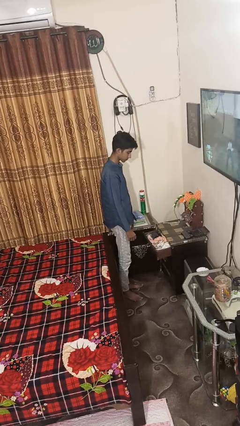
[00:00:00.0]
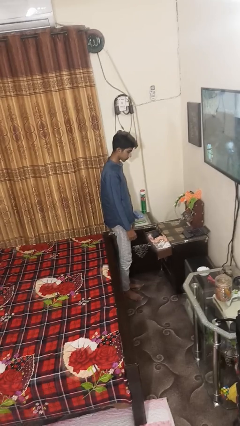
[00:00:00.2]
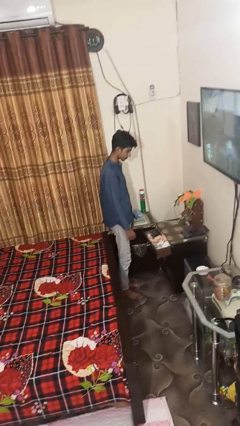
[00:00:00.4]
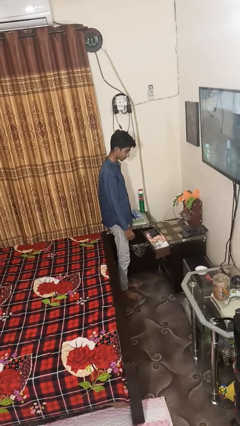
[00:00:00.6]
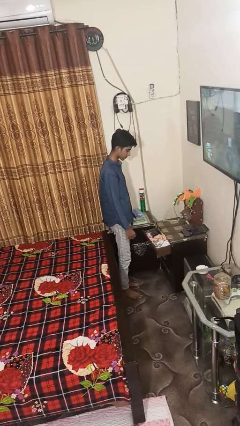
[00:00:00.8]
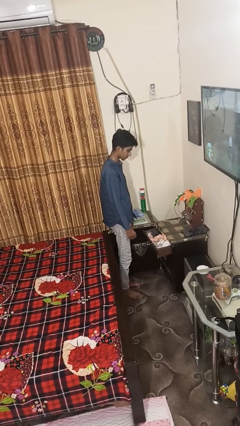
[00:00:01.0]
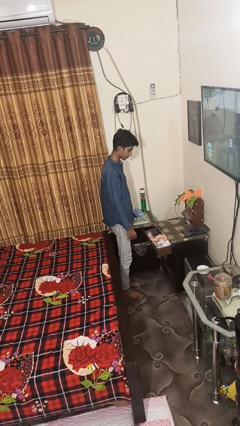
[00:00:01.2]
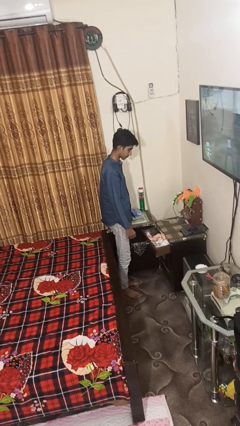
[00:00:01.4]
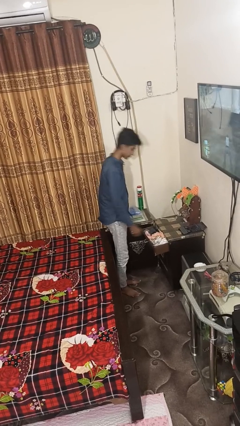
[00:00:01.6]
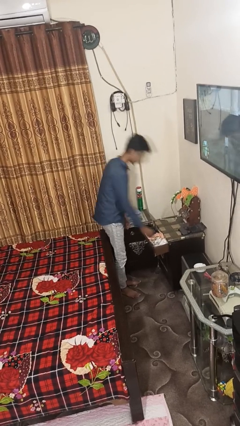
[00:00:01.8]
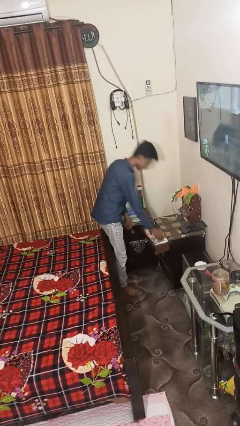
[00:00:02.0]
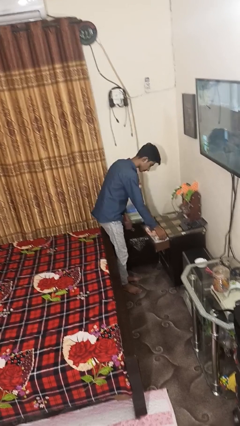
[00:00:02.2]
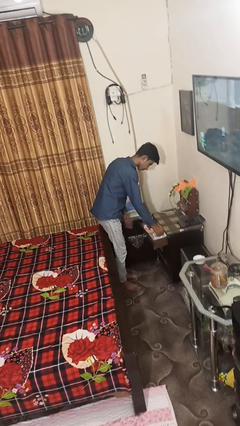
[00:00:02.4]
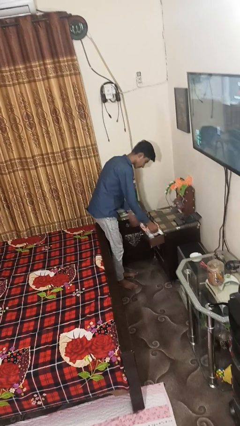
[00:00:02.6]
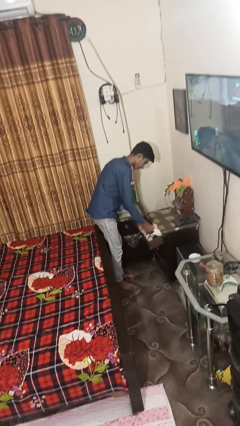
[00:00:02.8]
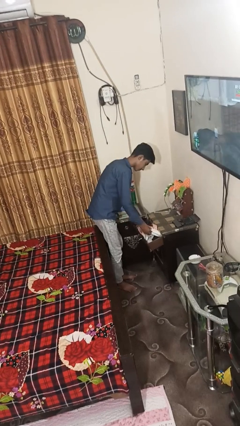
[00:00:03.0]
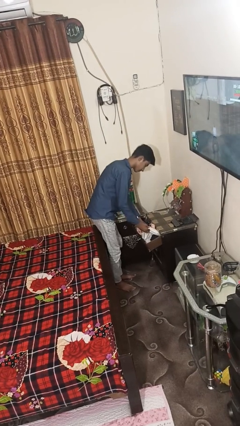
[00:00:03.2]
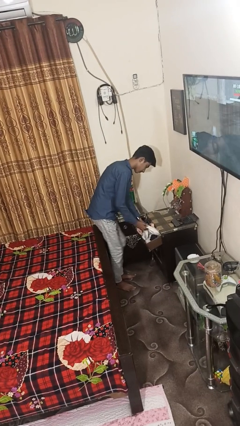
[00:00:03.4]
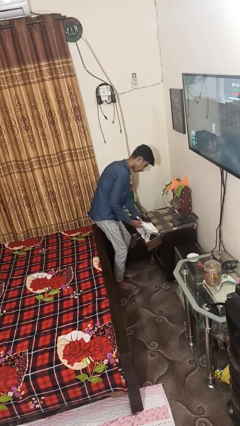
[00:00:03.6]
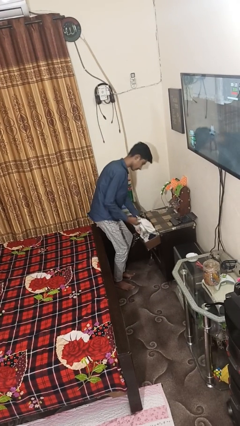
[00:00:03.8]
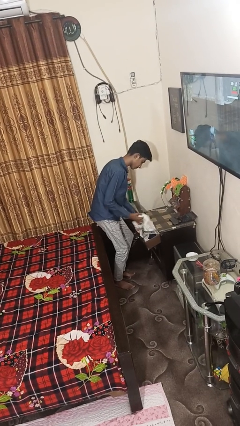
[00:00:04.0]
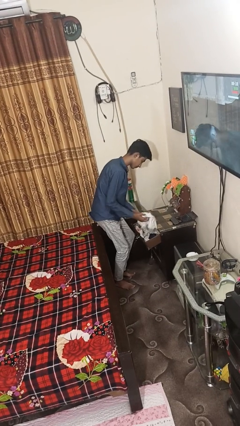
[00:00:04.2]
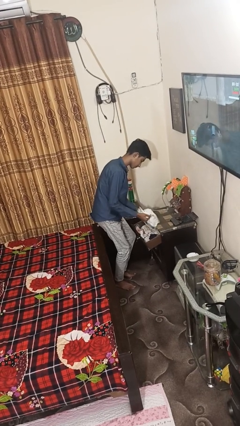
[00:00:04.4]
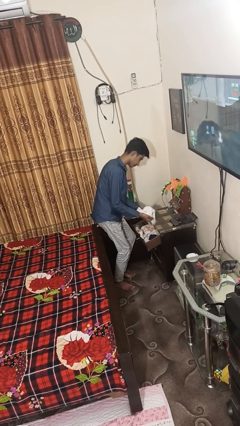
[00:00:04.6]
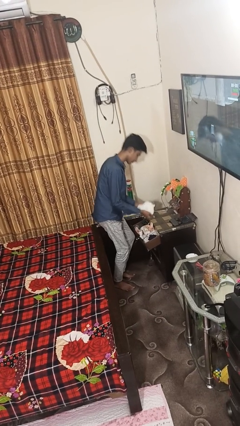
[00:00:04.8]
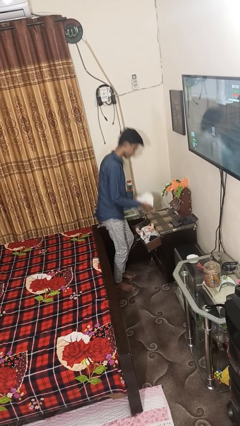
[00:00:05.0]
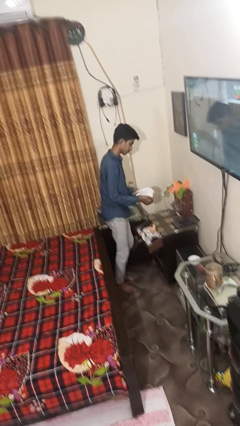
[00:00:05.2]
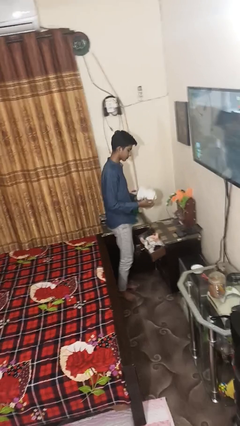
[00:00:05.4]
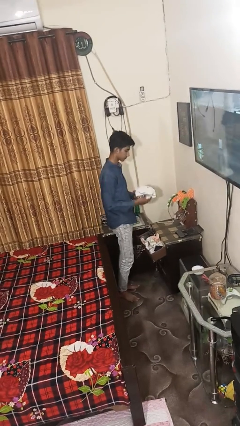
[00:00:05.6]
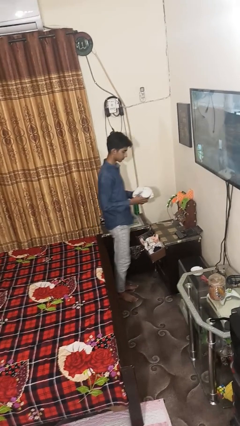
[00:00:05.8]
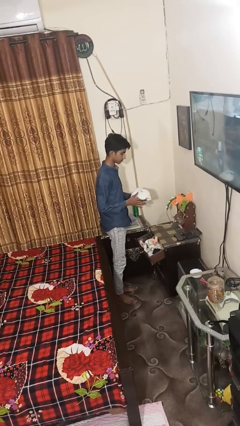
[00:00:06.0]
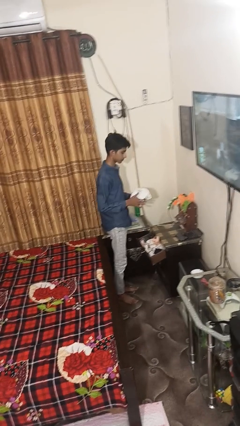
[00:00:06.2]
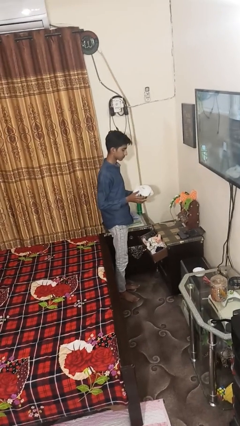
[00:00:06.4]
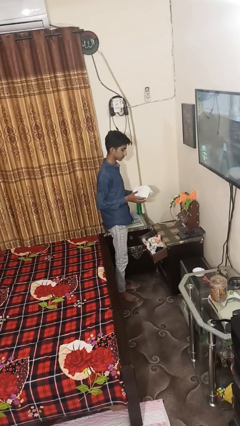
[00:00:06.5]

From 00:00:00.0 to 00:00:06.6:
person takes clothes from dresser

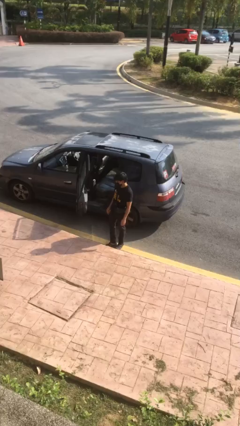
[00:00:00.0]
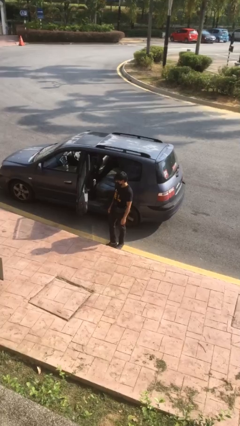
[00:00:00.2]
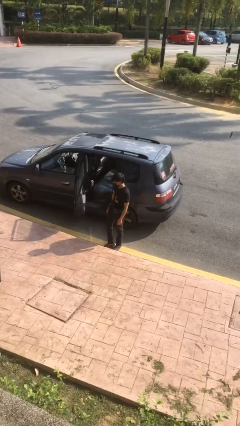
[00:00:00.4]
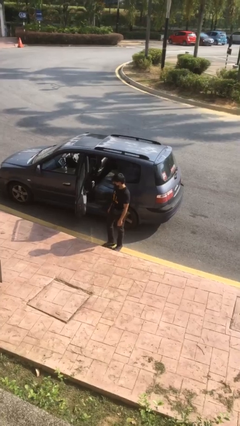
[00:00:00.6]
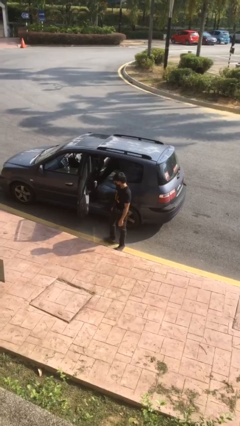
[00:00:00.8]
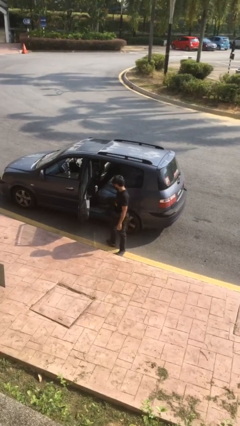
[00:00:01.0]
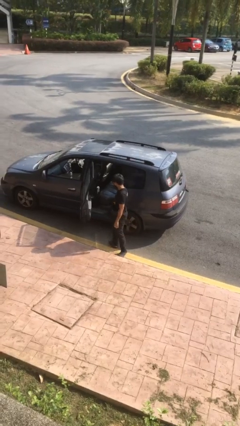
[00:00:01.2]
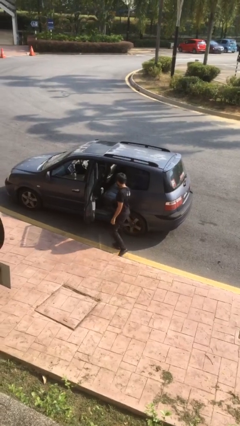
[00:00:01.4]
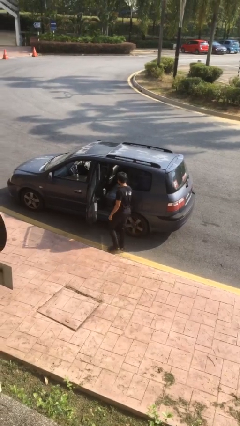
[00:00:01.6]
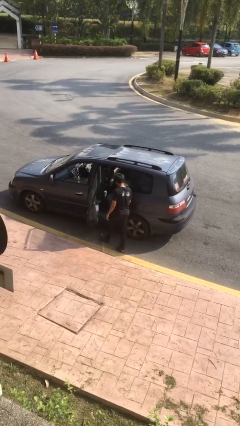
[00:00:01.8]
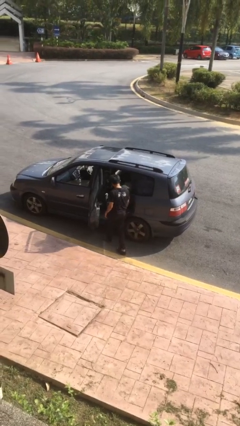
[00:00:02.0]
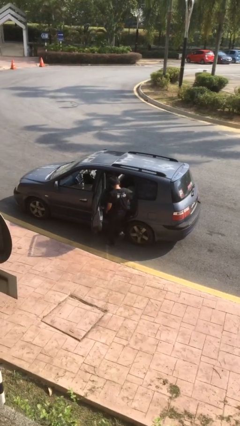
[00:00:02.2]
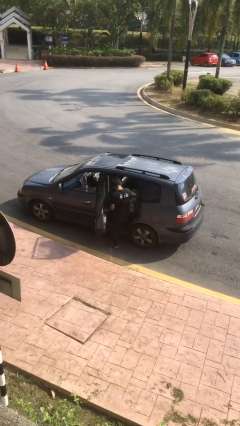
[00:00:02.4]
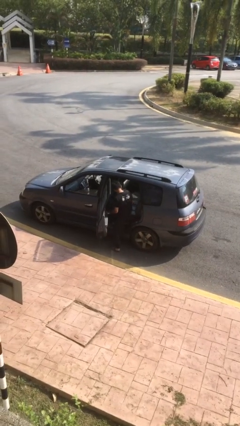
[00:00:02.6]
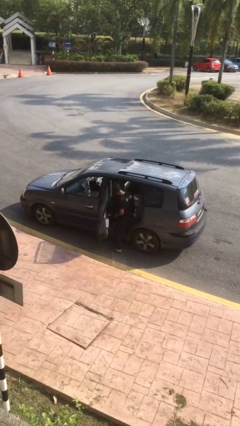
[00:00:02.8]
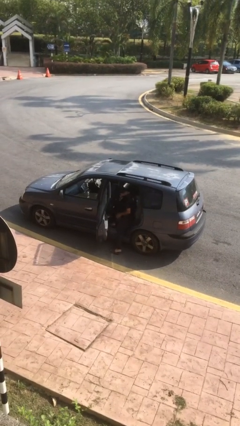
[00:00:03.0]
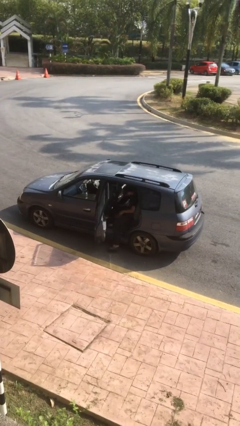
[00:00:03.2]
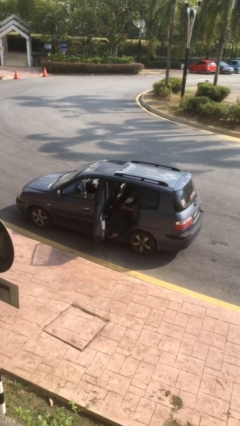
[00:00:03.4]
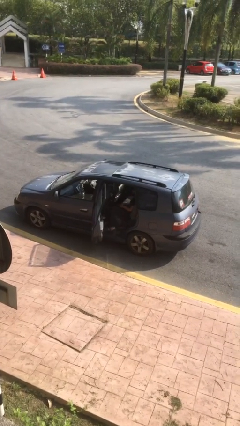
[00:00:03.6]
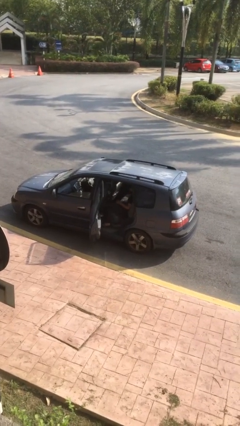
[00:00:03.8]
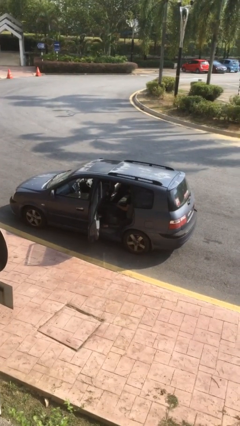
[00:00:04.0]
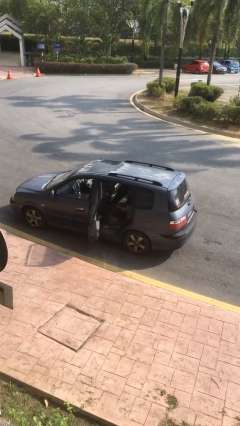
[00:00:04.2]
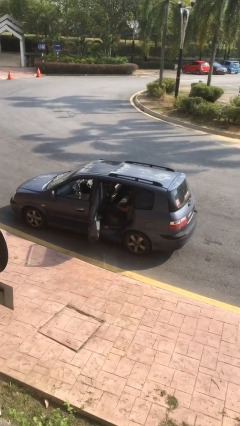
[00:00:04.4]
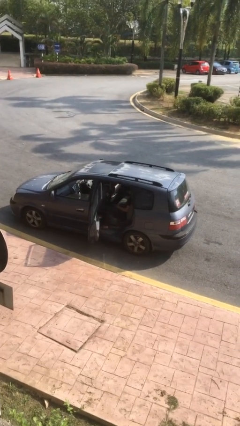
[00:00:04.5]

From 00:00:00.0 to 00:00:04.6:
person enters car

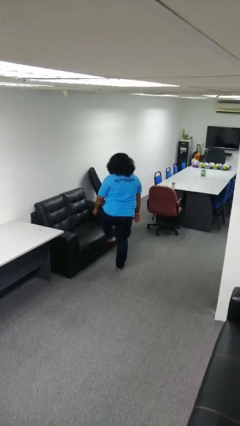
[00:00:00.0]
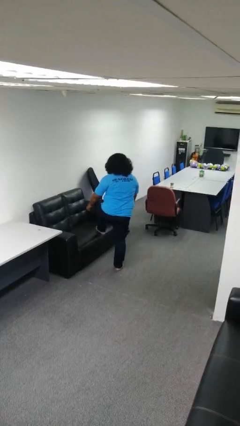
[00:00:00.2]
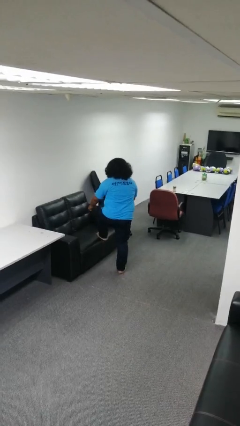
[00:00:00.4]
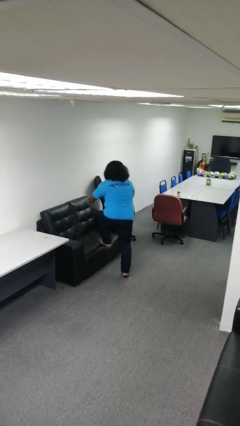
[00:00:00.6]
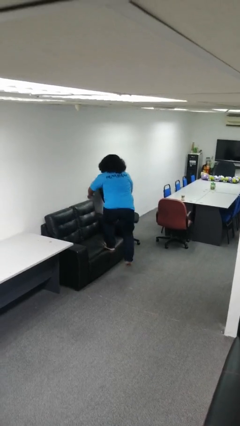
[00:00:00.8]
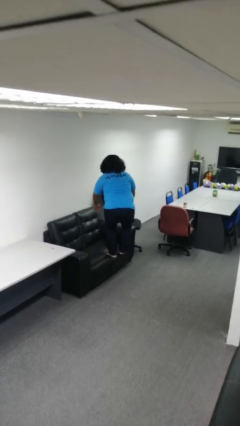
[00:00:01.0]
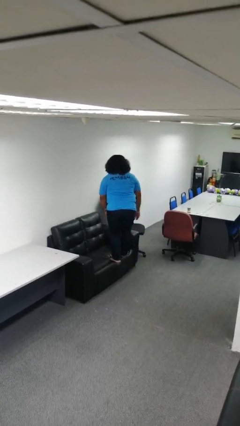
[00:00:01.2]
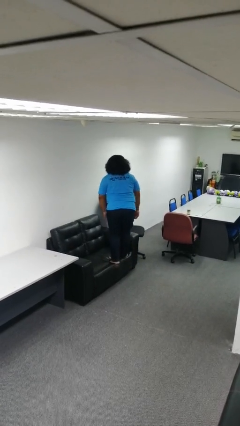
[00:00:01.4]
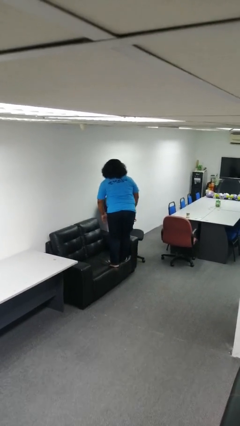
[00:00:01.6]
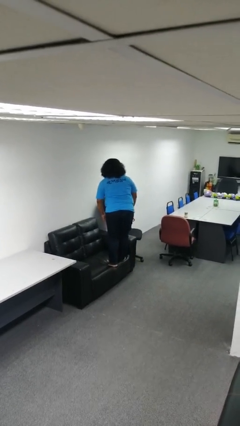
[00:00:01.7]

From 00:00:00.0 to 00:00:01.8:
person climbs on couch

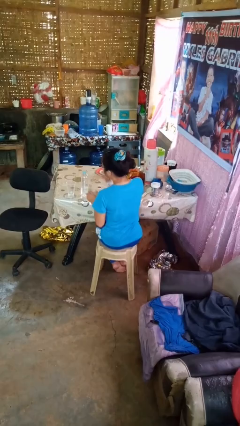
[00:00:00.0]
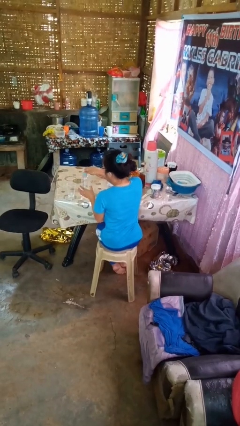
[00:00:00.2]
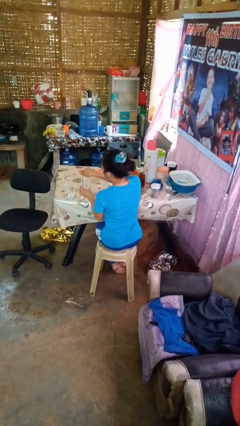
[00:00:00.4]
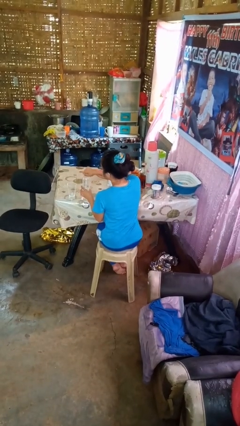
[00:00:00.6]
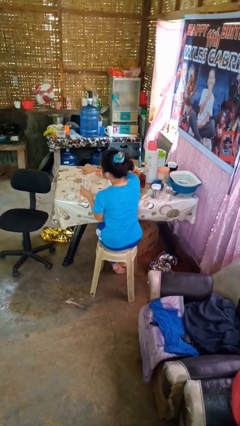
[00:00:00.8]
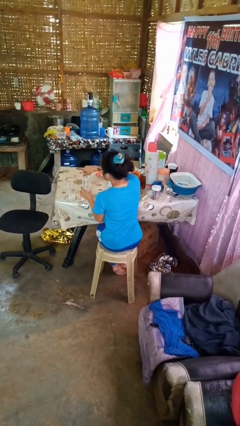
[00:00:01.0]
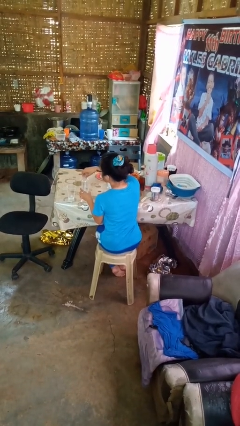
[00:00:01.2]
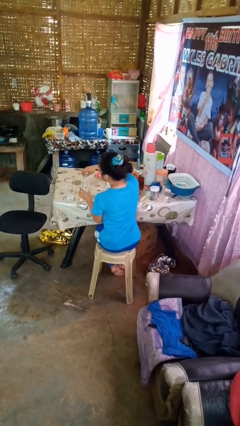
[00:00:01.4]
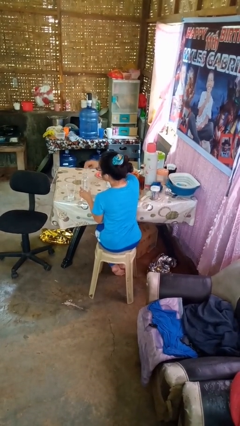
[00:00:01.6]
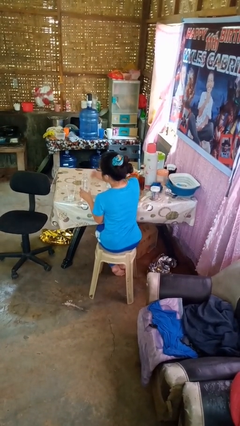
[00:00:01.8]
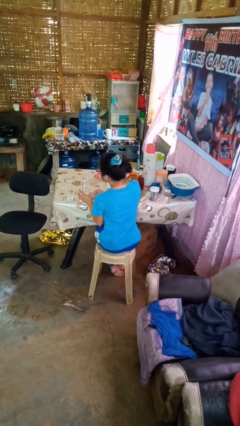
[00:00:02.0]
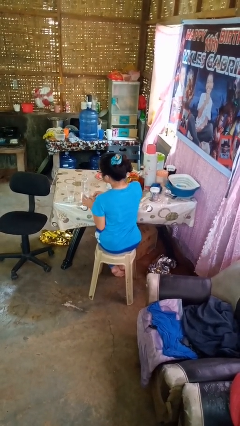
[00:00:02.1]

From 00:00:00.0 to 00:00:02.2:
person unscrews lid from bottle

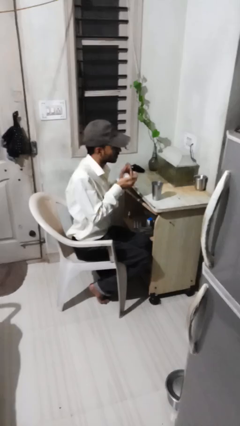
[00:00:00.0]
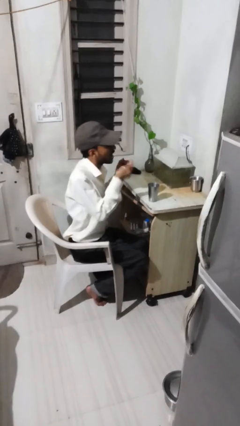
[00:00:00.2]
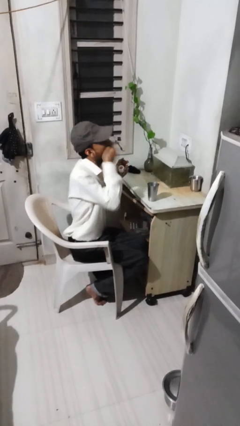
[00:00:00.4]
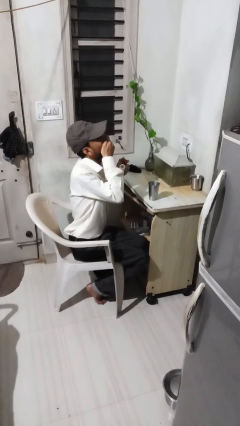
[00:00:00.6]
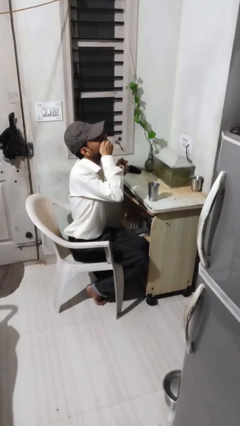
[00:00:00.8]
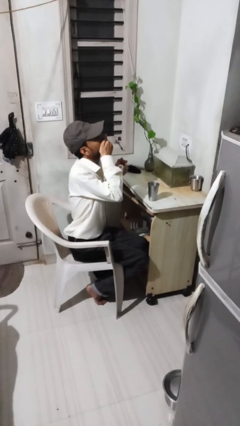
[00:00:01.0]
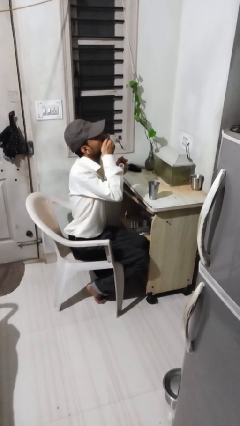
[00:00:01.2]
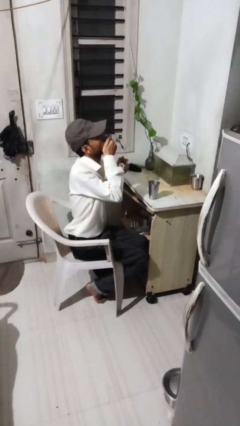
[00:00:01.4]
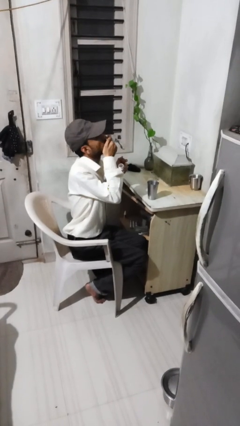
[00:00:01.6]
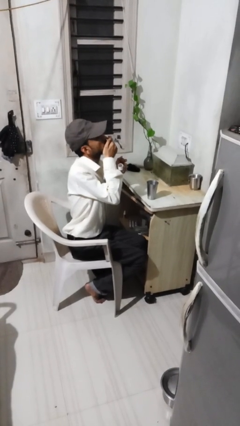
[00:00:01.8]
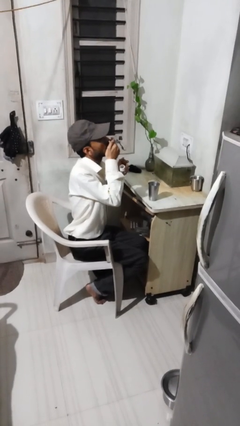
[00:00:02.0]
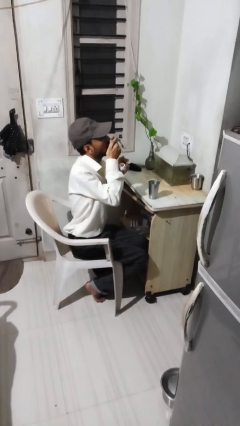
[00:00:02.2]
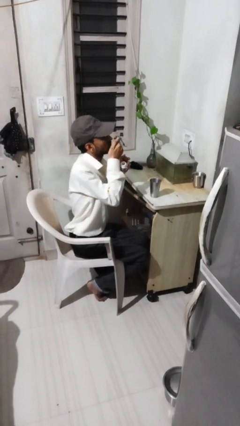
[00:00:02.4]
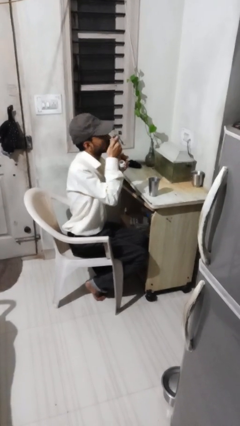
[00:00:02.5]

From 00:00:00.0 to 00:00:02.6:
person takes medicine pills
